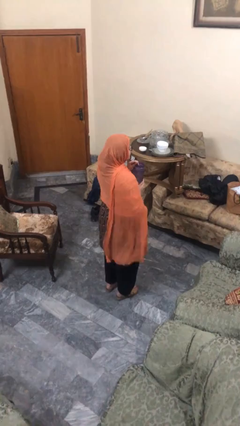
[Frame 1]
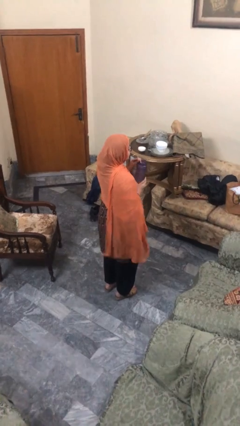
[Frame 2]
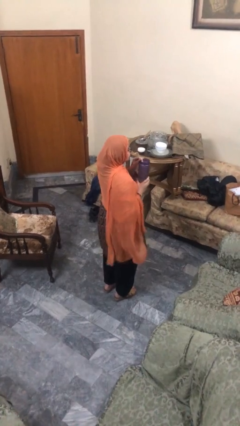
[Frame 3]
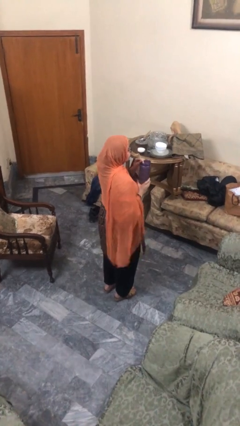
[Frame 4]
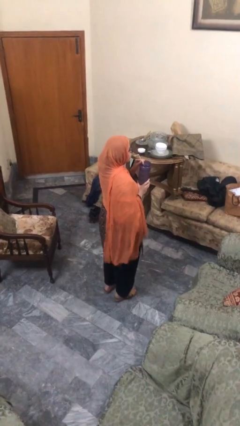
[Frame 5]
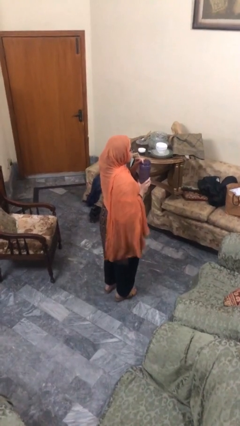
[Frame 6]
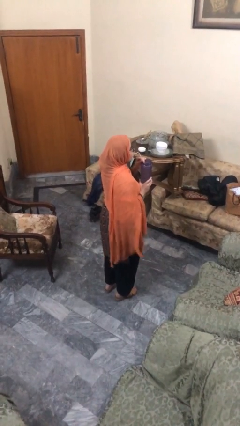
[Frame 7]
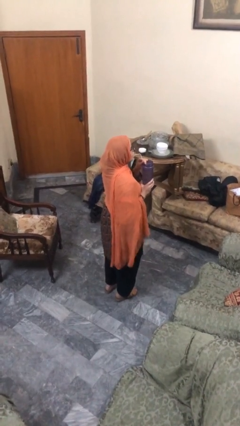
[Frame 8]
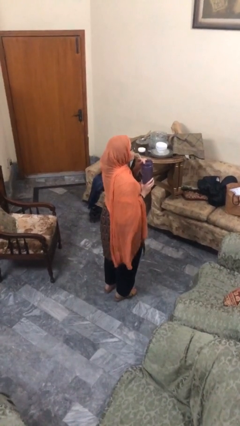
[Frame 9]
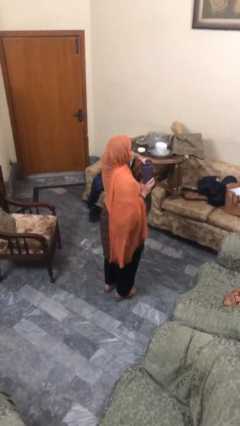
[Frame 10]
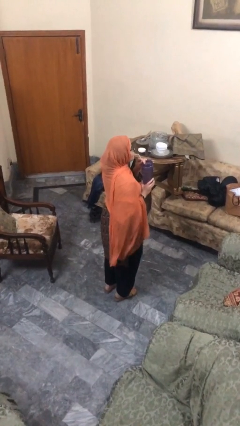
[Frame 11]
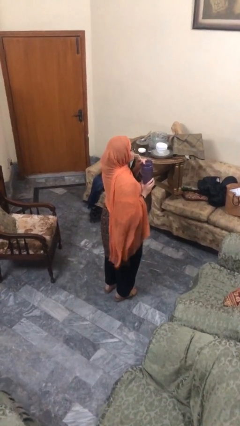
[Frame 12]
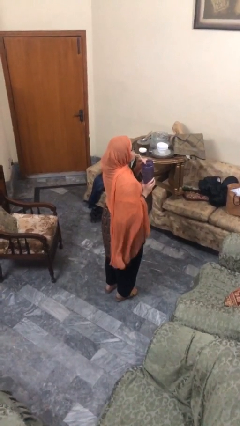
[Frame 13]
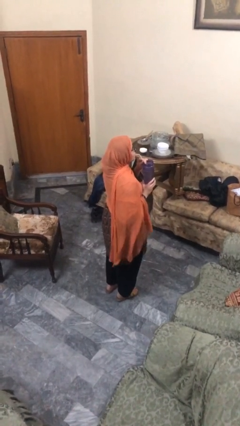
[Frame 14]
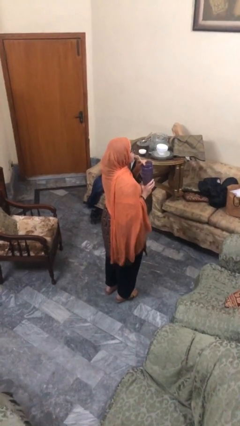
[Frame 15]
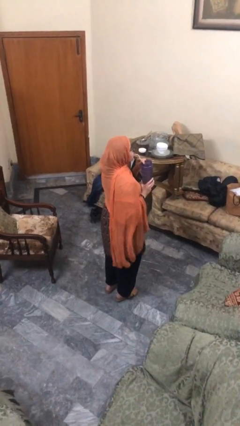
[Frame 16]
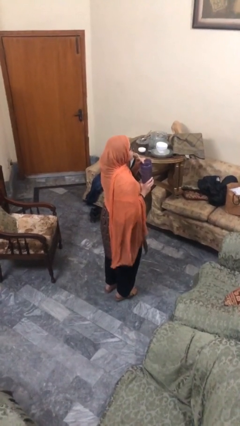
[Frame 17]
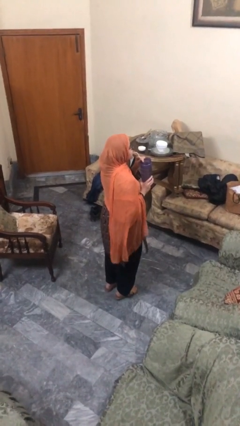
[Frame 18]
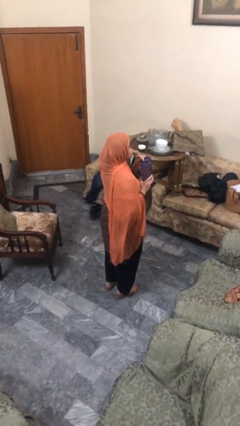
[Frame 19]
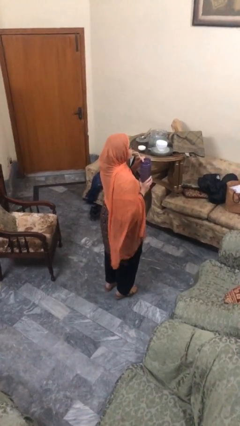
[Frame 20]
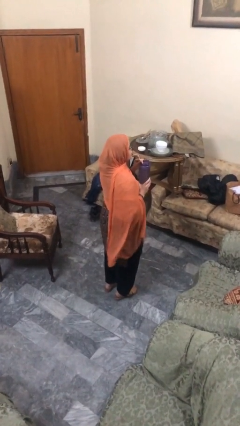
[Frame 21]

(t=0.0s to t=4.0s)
person drinks from straw

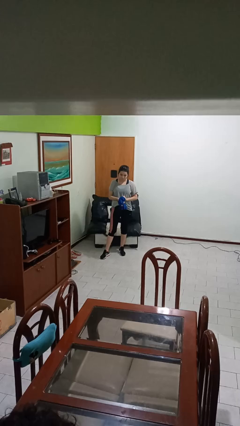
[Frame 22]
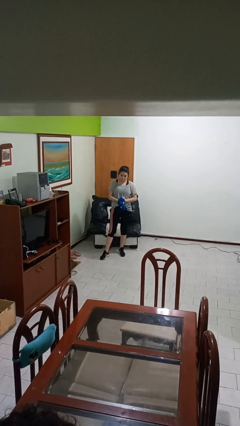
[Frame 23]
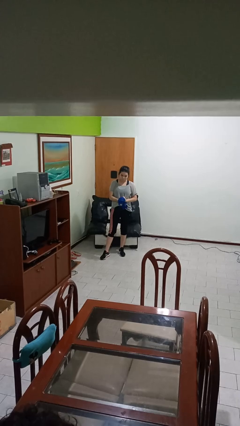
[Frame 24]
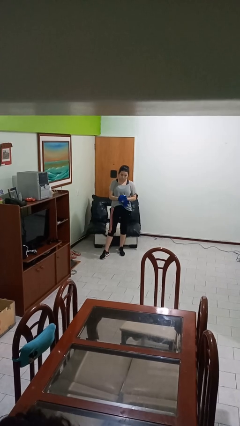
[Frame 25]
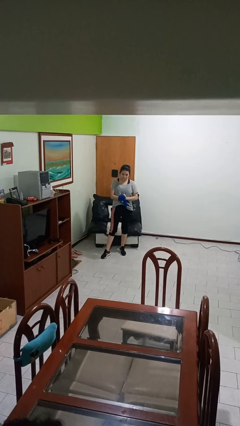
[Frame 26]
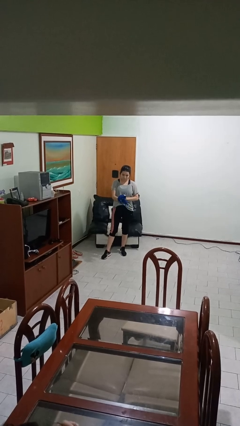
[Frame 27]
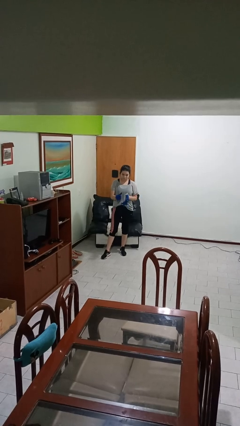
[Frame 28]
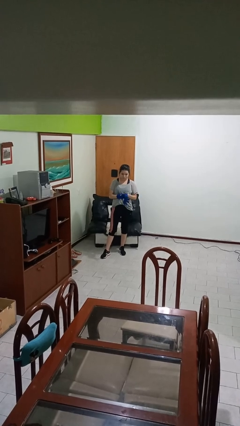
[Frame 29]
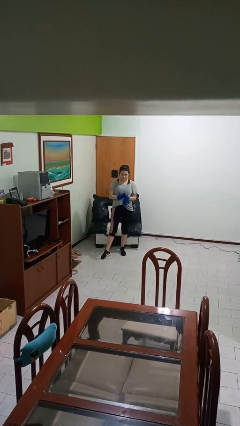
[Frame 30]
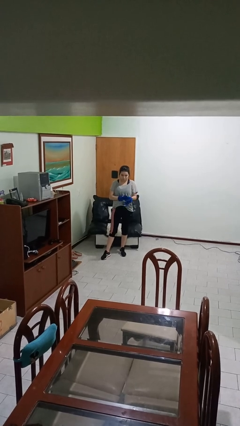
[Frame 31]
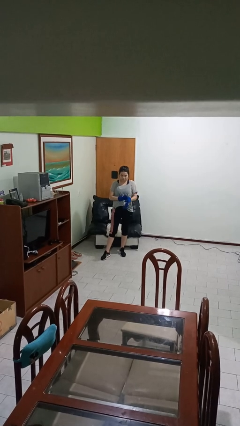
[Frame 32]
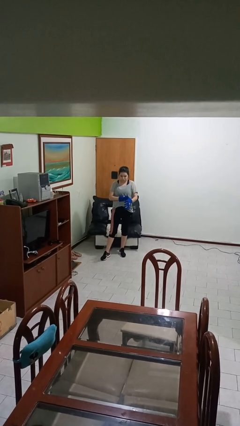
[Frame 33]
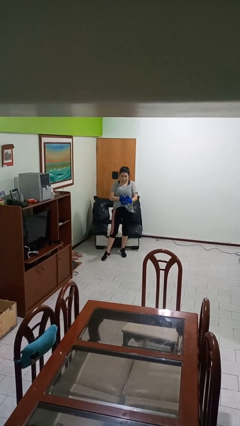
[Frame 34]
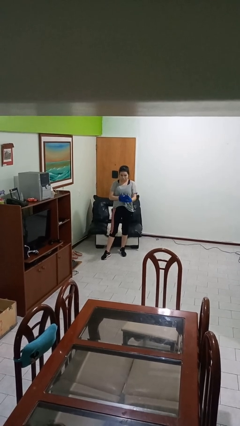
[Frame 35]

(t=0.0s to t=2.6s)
person puts on gloves

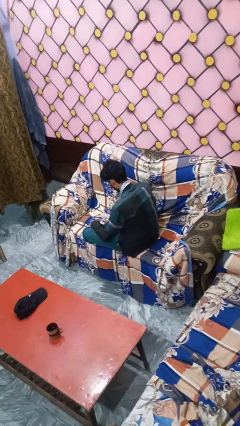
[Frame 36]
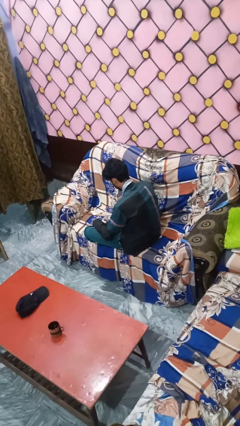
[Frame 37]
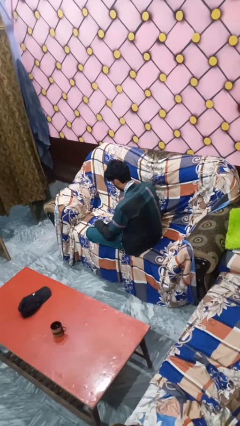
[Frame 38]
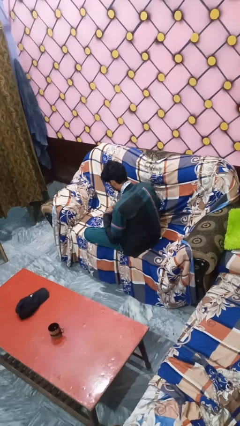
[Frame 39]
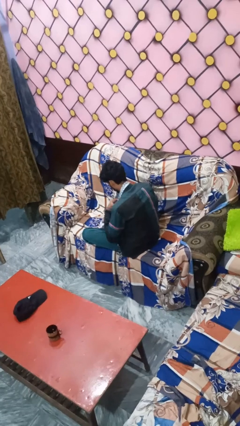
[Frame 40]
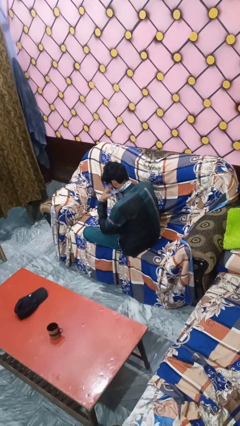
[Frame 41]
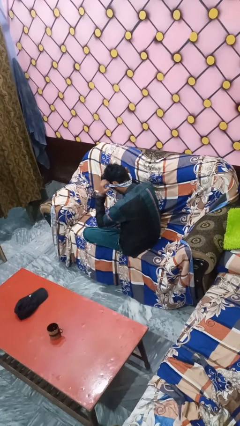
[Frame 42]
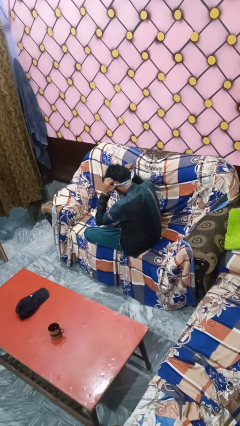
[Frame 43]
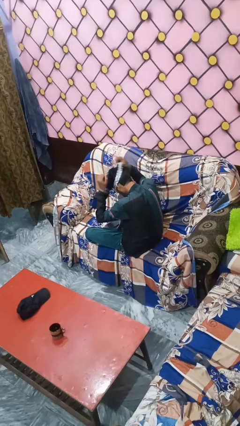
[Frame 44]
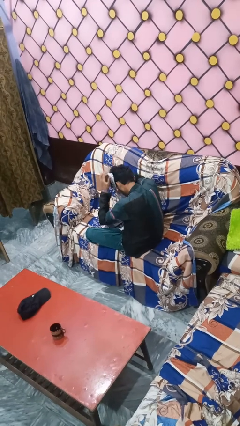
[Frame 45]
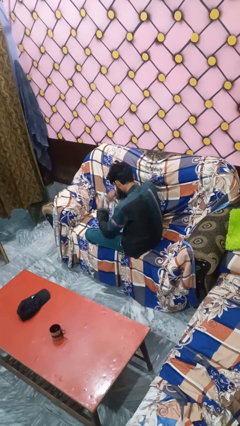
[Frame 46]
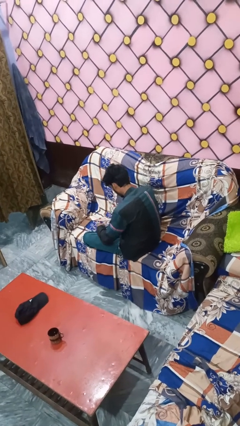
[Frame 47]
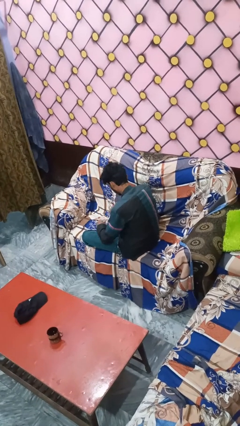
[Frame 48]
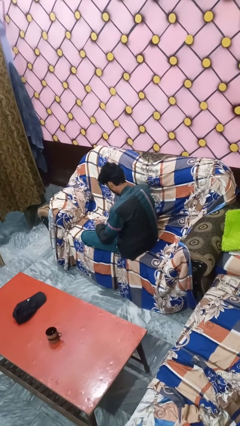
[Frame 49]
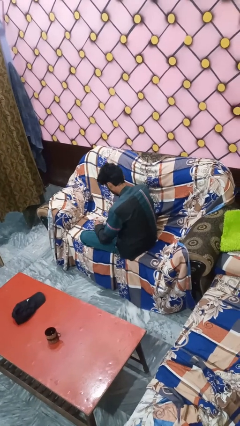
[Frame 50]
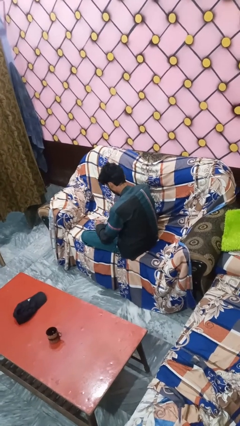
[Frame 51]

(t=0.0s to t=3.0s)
person takes off necktie

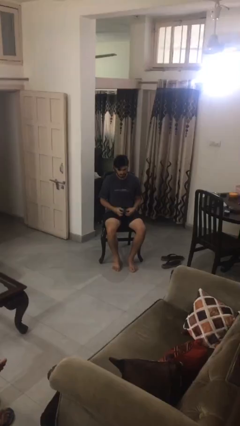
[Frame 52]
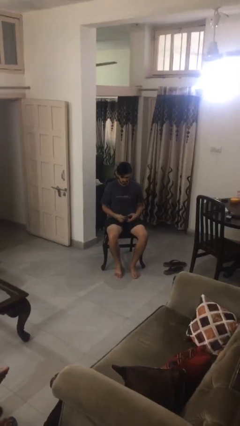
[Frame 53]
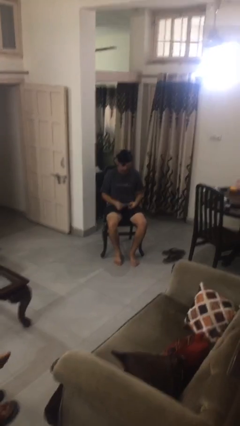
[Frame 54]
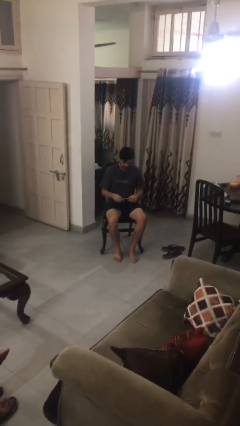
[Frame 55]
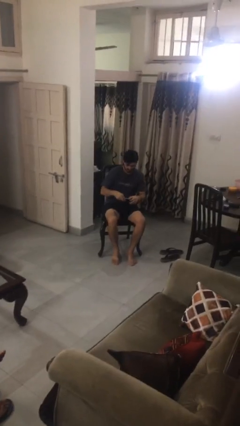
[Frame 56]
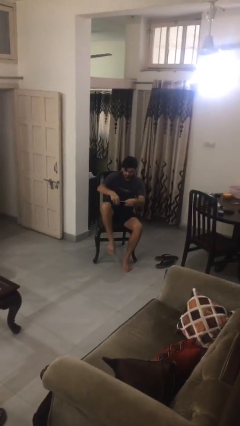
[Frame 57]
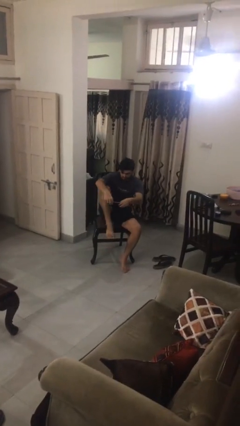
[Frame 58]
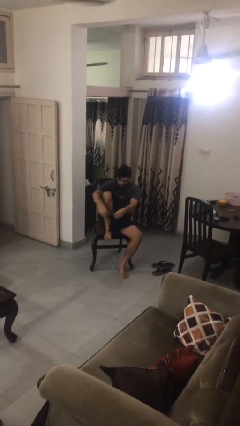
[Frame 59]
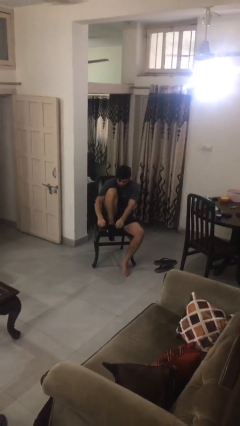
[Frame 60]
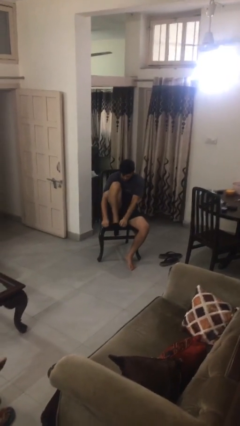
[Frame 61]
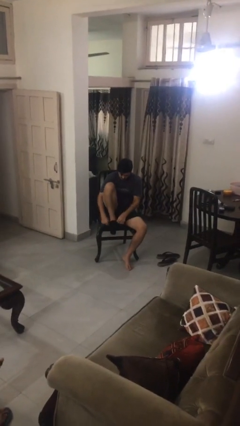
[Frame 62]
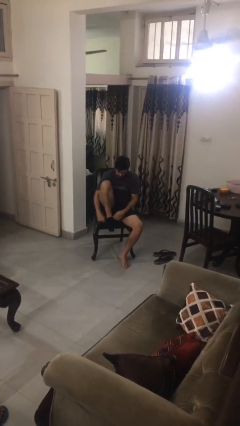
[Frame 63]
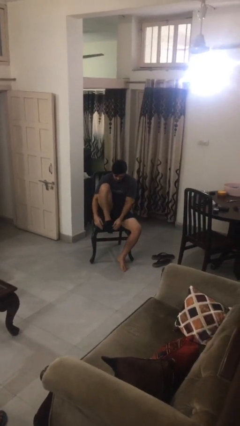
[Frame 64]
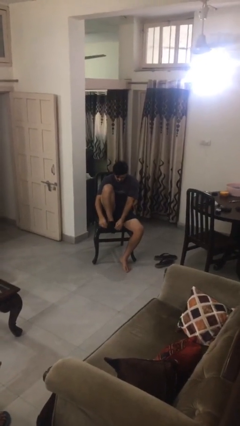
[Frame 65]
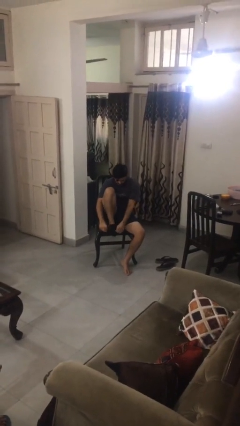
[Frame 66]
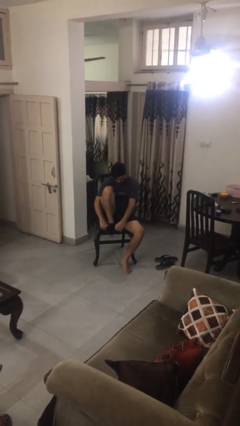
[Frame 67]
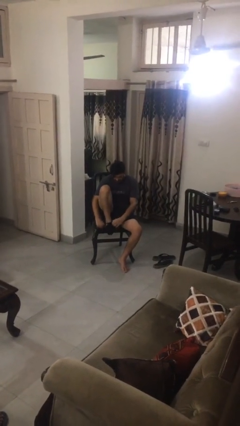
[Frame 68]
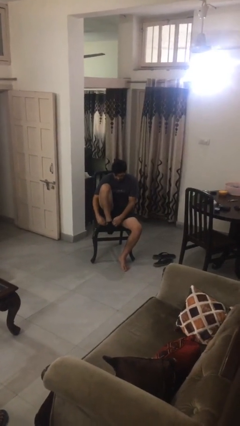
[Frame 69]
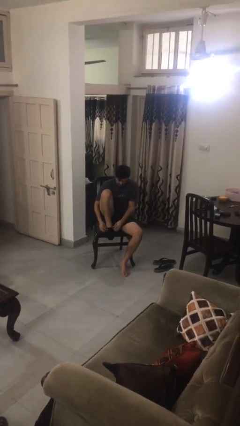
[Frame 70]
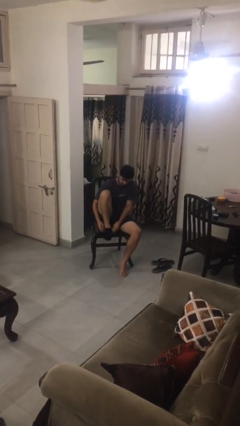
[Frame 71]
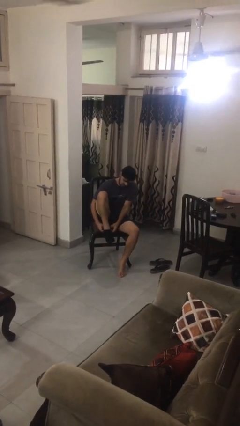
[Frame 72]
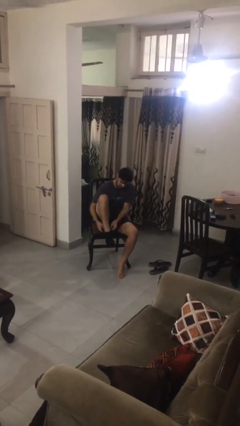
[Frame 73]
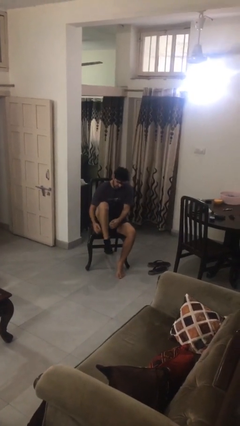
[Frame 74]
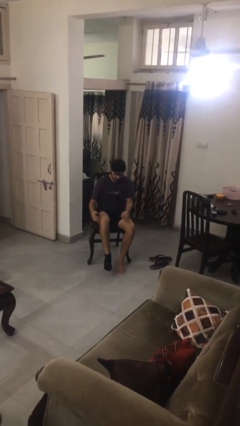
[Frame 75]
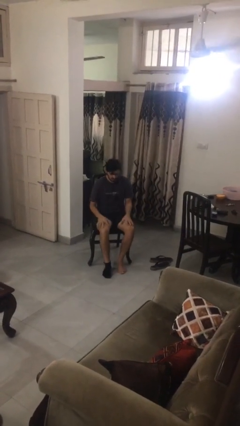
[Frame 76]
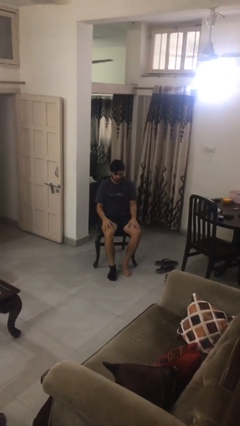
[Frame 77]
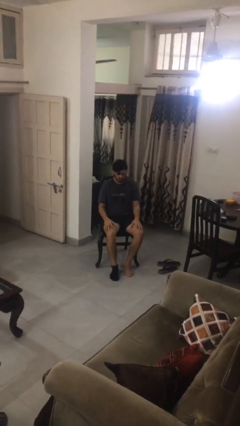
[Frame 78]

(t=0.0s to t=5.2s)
person puts on socks

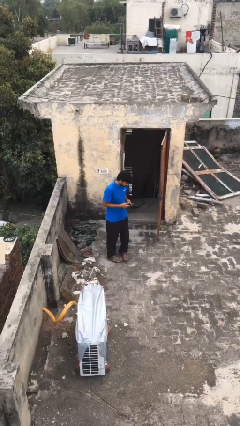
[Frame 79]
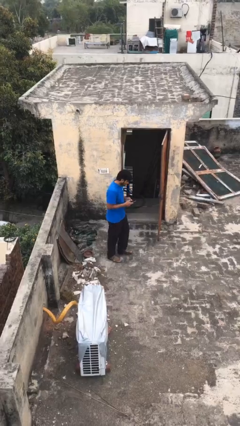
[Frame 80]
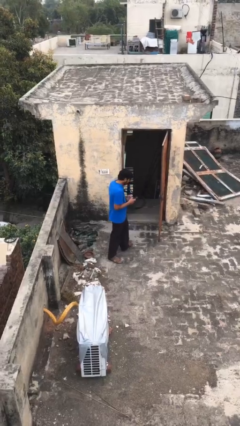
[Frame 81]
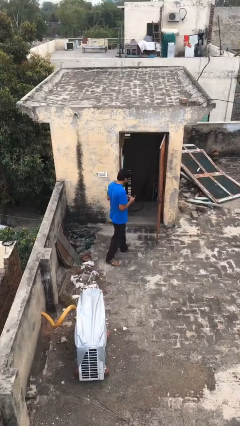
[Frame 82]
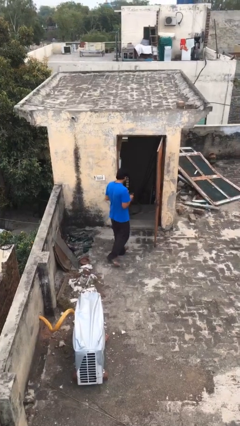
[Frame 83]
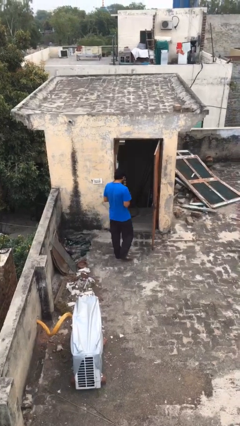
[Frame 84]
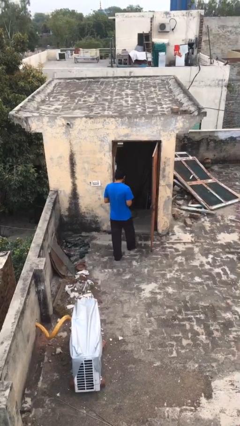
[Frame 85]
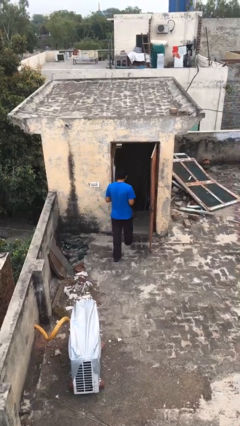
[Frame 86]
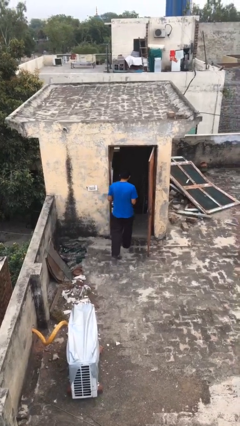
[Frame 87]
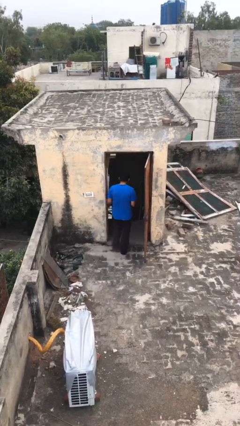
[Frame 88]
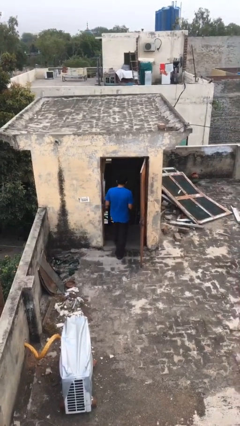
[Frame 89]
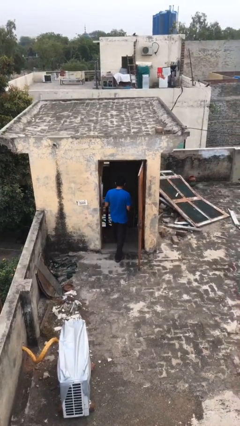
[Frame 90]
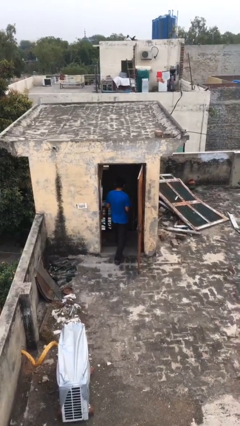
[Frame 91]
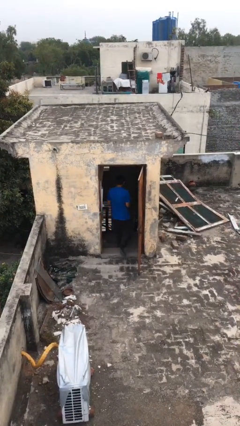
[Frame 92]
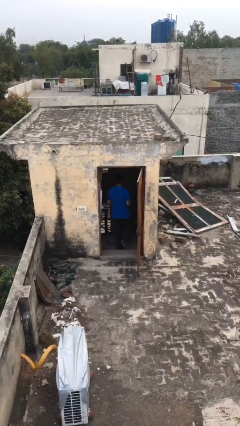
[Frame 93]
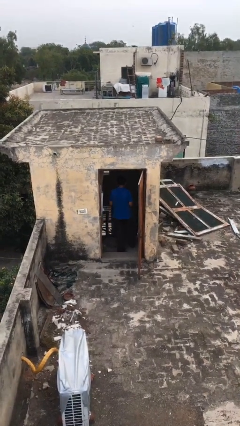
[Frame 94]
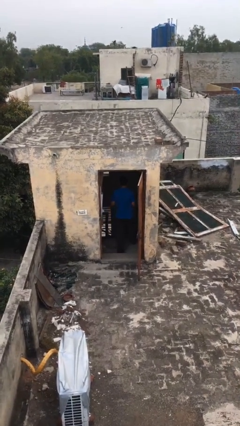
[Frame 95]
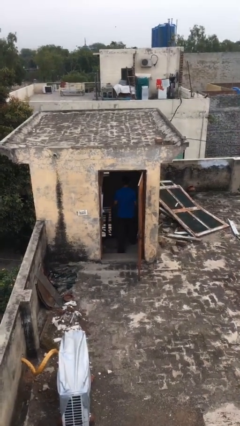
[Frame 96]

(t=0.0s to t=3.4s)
person exits scene through structure
